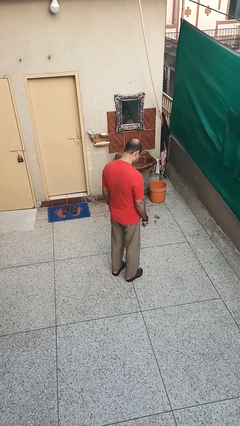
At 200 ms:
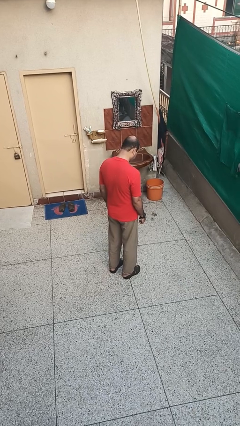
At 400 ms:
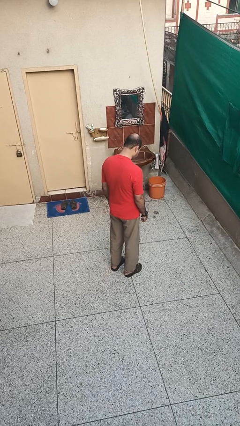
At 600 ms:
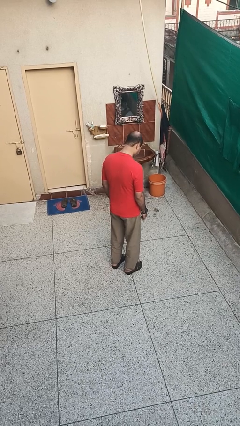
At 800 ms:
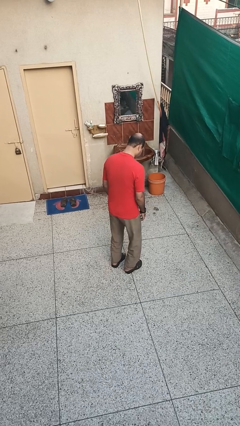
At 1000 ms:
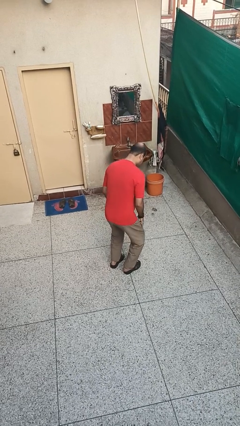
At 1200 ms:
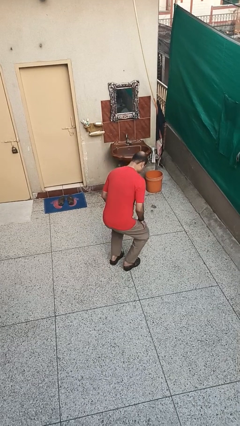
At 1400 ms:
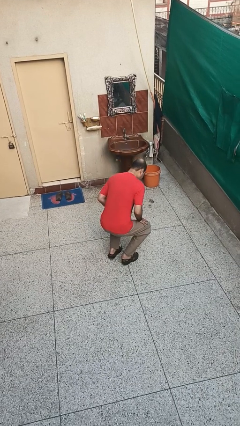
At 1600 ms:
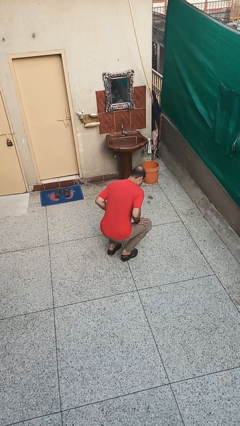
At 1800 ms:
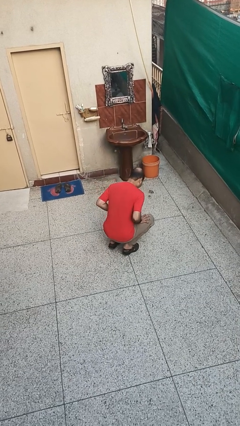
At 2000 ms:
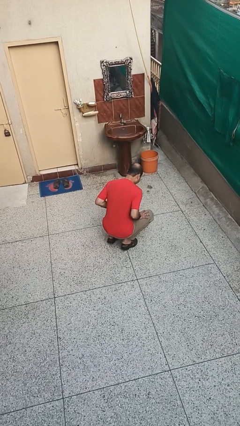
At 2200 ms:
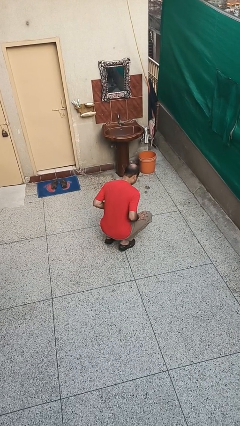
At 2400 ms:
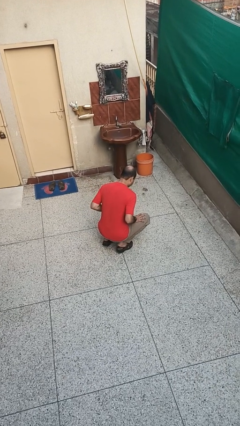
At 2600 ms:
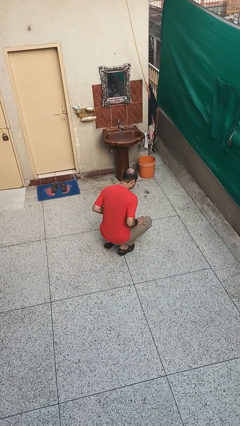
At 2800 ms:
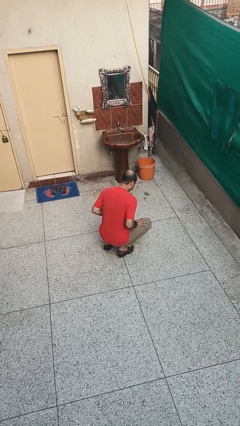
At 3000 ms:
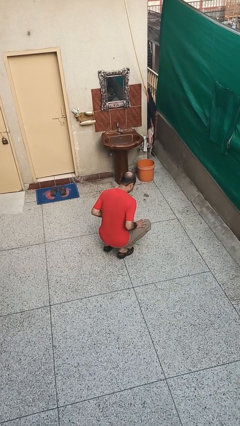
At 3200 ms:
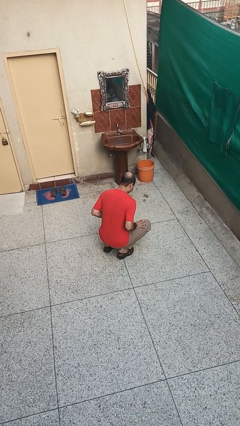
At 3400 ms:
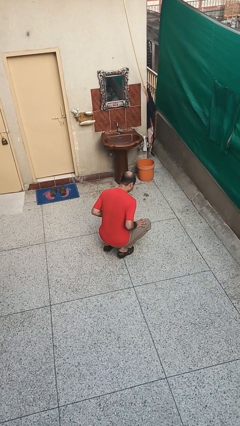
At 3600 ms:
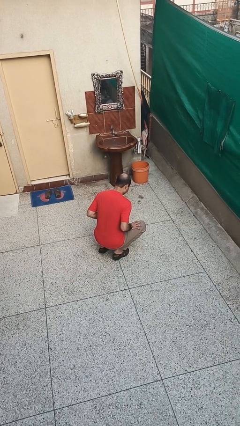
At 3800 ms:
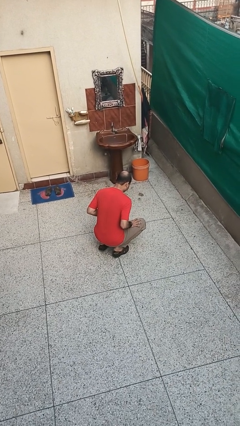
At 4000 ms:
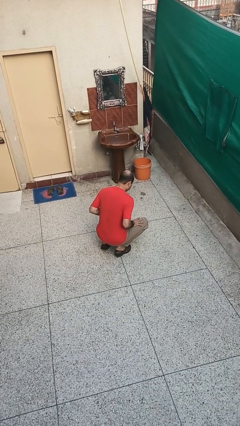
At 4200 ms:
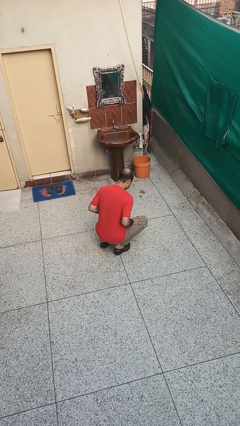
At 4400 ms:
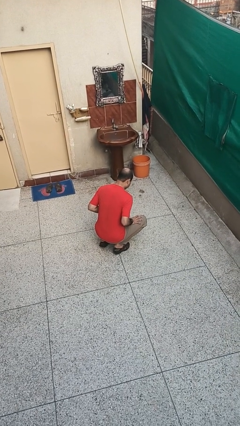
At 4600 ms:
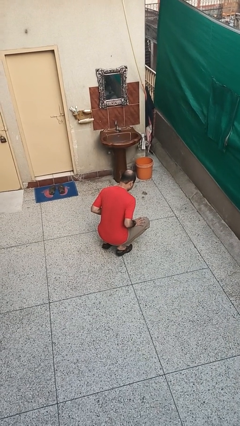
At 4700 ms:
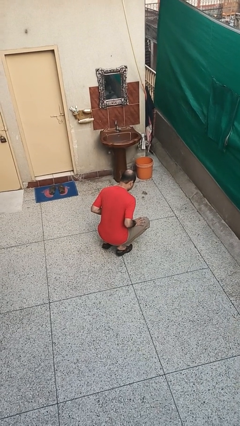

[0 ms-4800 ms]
person squats

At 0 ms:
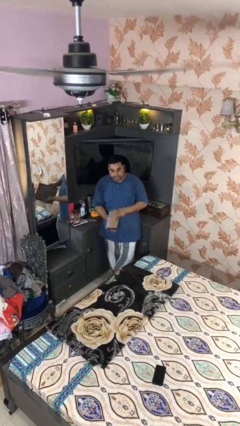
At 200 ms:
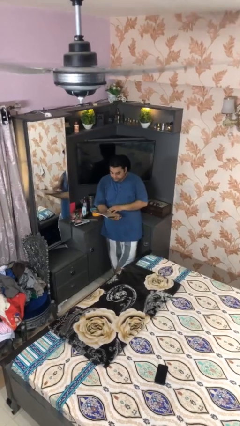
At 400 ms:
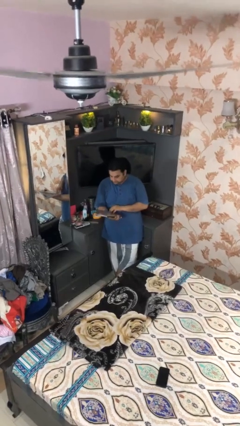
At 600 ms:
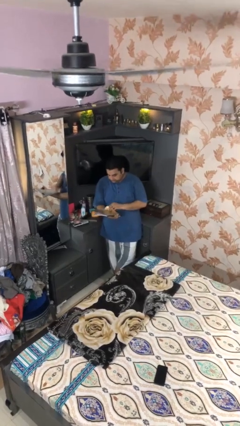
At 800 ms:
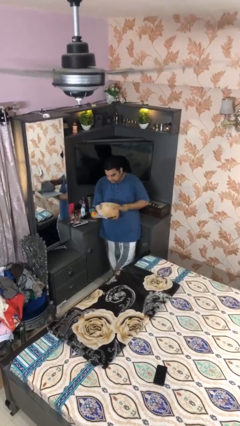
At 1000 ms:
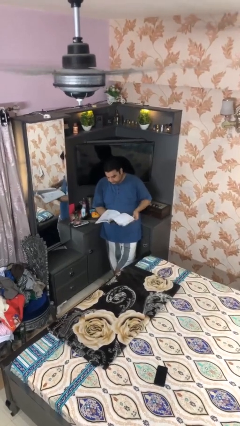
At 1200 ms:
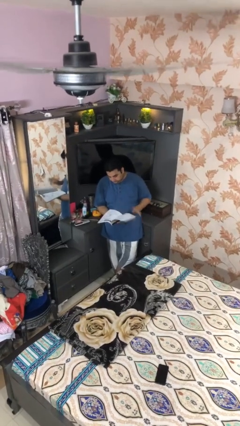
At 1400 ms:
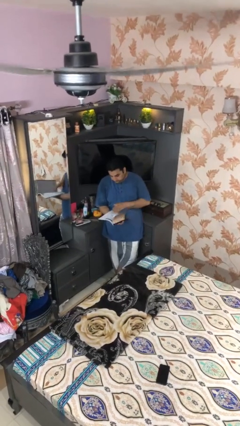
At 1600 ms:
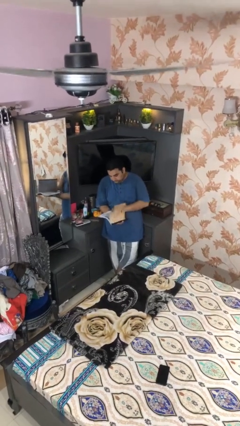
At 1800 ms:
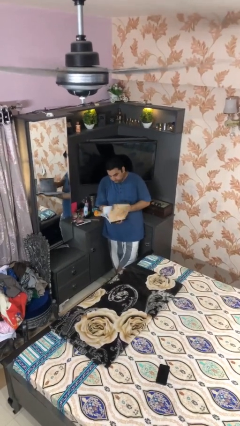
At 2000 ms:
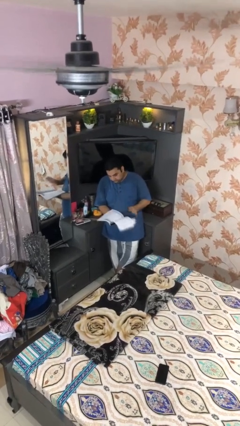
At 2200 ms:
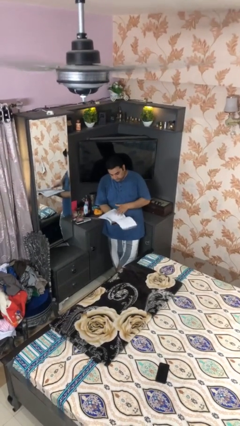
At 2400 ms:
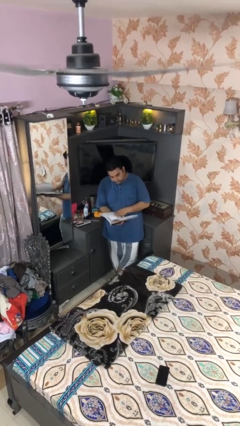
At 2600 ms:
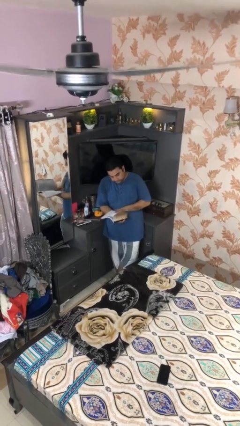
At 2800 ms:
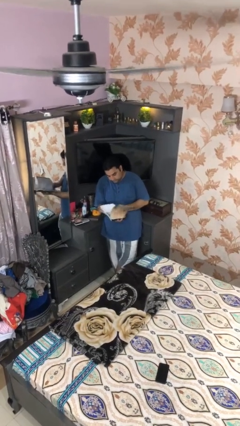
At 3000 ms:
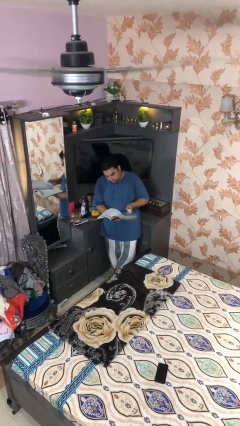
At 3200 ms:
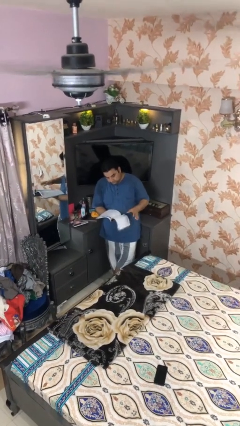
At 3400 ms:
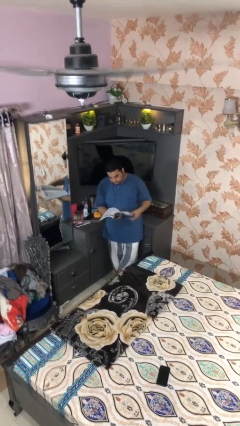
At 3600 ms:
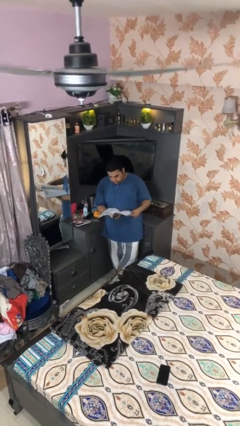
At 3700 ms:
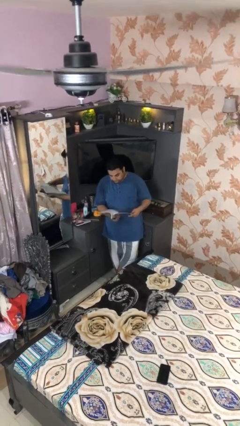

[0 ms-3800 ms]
person reads book

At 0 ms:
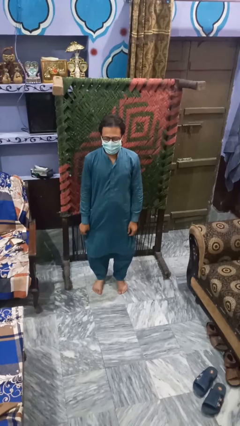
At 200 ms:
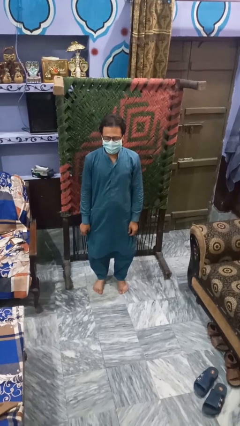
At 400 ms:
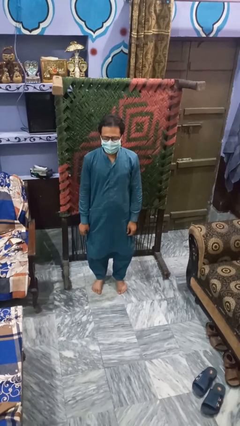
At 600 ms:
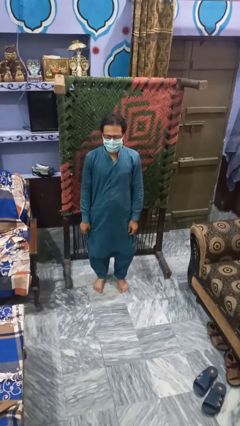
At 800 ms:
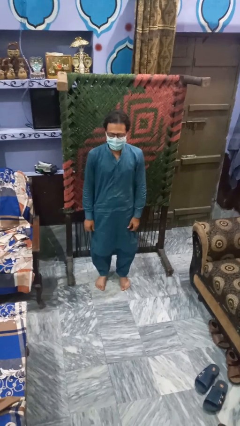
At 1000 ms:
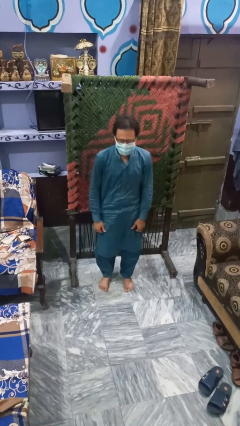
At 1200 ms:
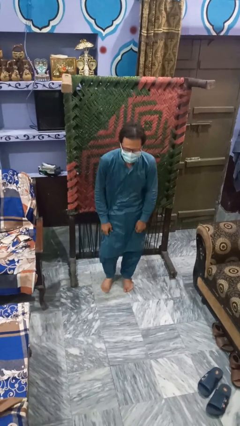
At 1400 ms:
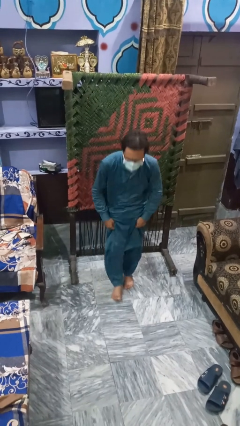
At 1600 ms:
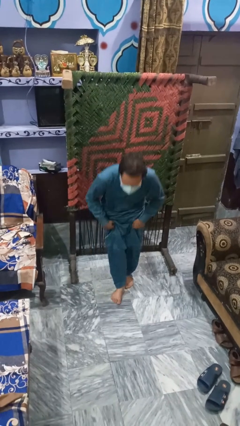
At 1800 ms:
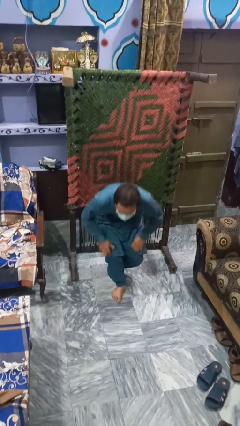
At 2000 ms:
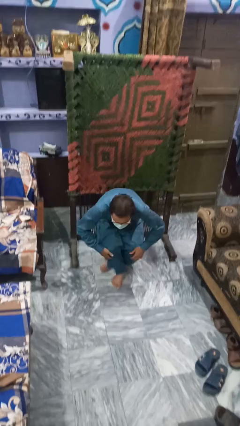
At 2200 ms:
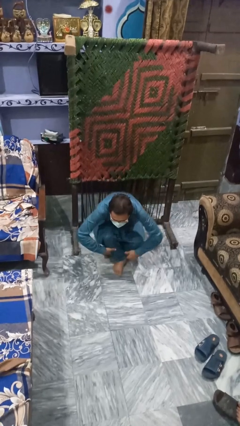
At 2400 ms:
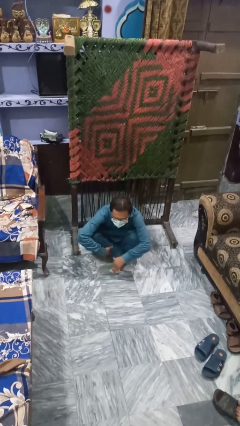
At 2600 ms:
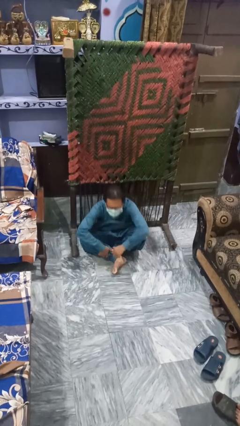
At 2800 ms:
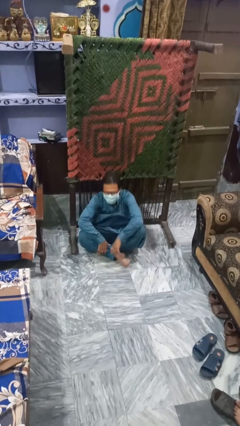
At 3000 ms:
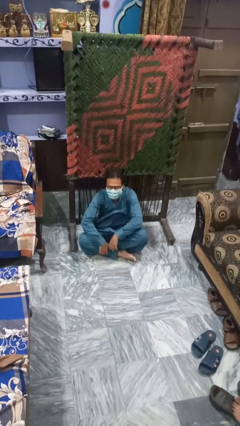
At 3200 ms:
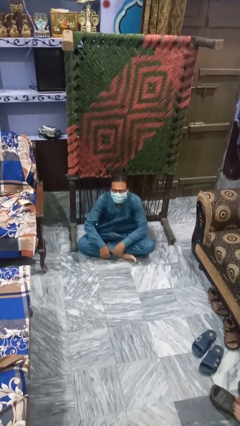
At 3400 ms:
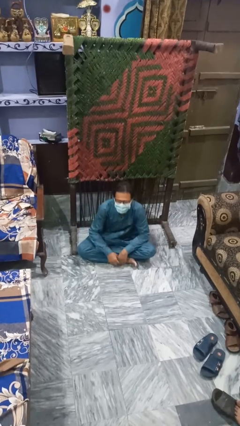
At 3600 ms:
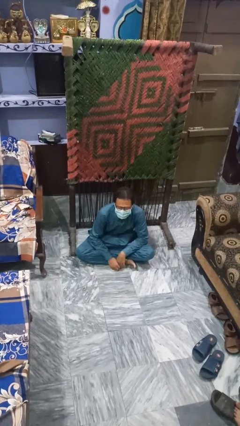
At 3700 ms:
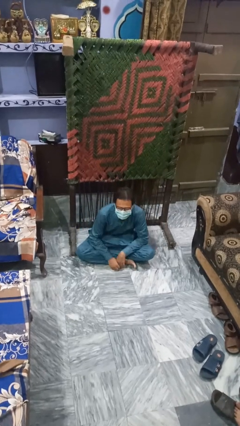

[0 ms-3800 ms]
person sits crisscross

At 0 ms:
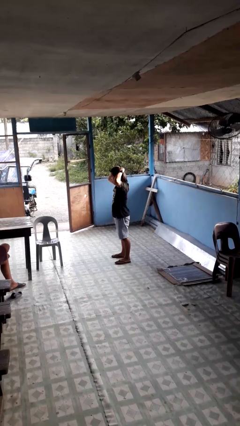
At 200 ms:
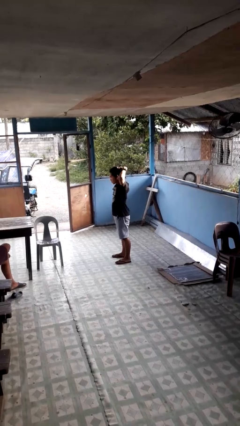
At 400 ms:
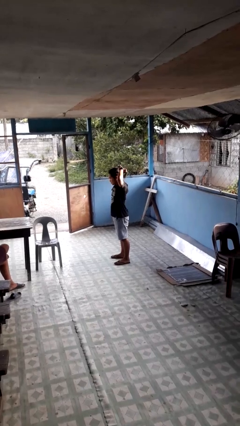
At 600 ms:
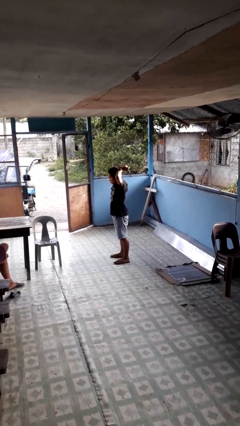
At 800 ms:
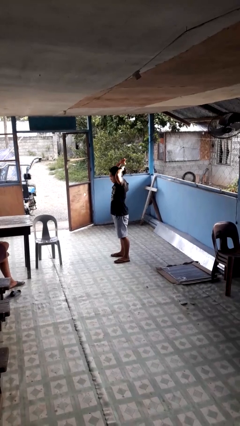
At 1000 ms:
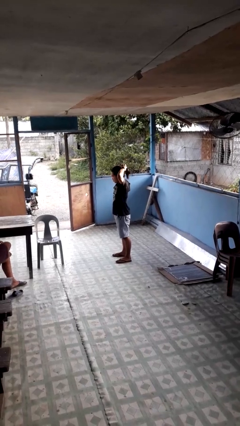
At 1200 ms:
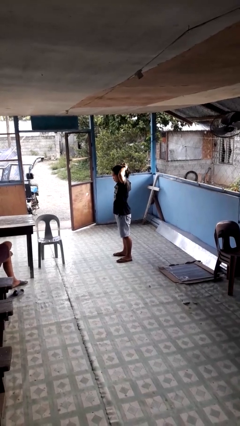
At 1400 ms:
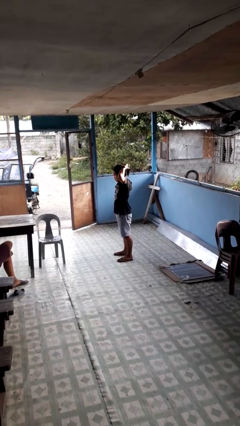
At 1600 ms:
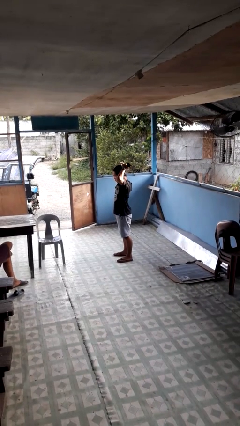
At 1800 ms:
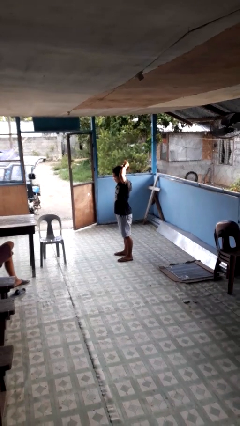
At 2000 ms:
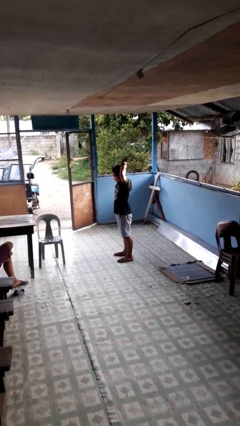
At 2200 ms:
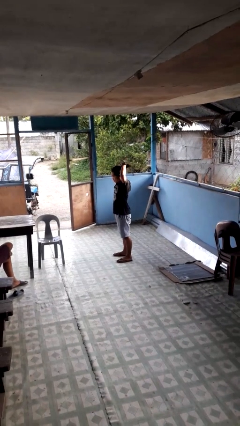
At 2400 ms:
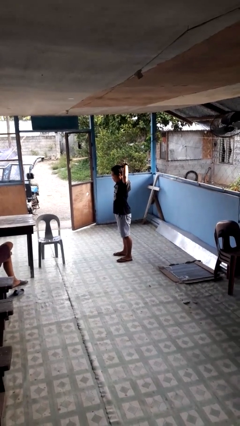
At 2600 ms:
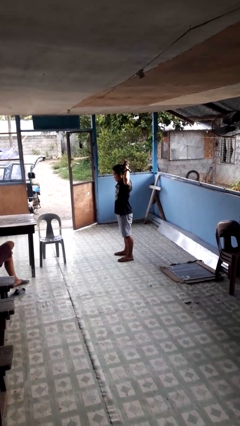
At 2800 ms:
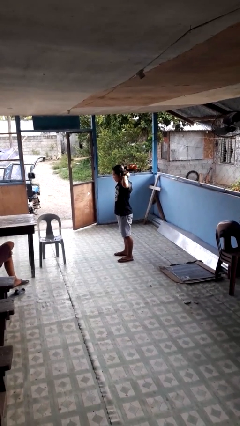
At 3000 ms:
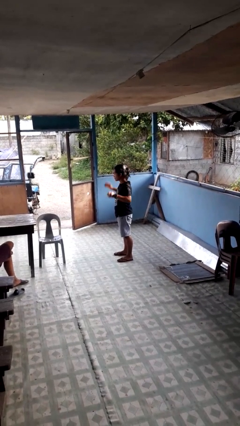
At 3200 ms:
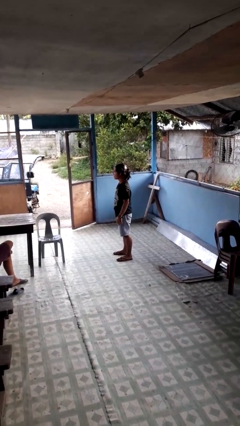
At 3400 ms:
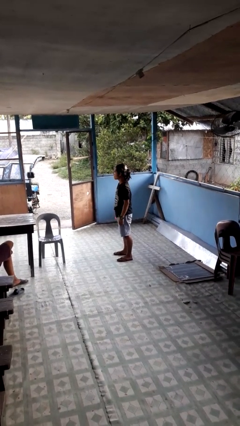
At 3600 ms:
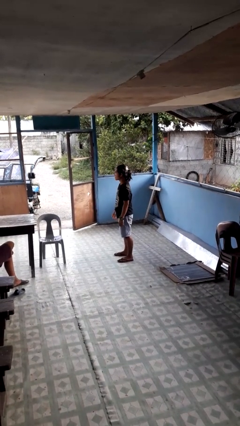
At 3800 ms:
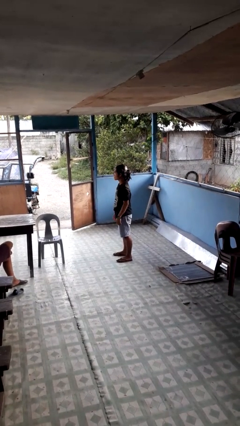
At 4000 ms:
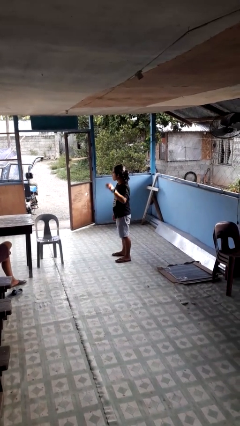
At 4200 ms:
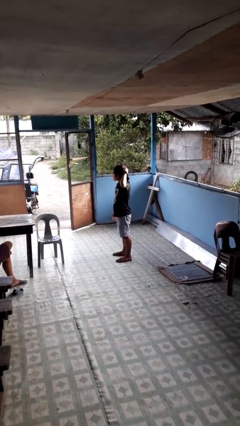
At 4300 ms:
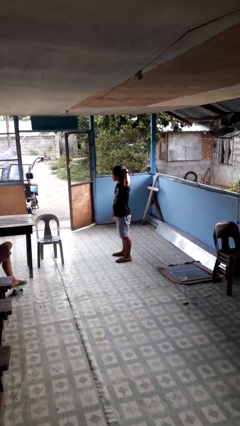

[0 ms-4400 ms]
person puts hair in ponytail

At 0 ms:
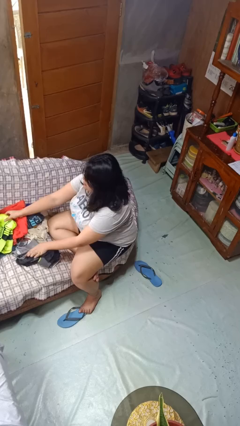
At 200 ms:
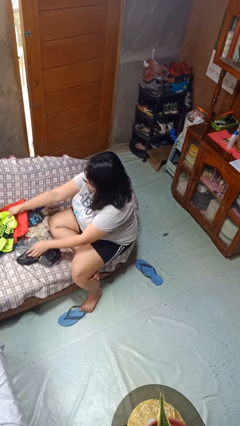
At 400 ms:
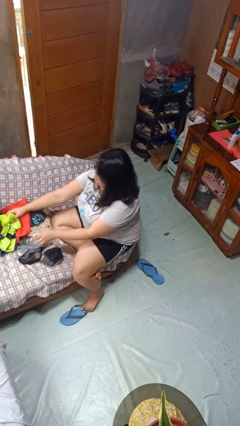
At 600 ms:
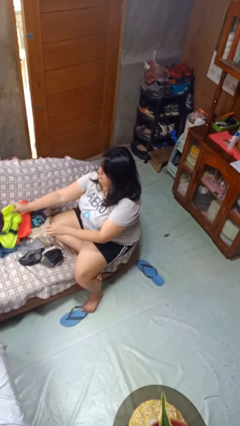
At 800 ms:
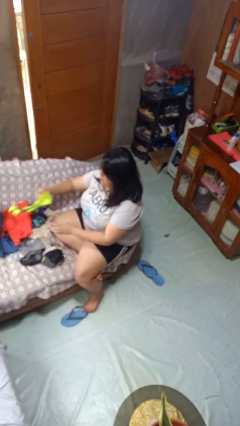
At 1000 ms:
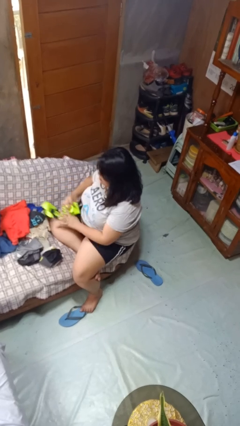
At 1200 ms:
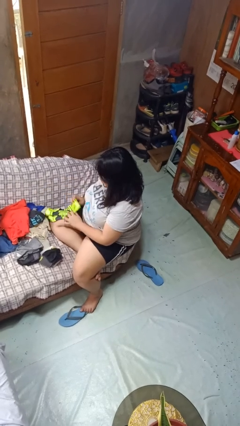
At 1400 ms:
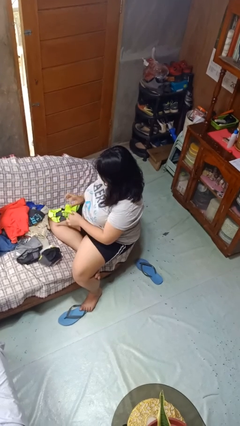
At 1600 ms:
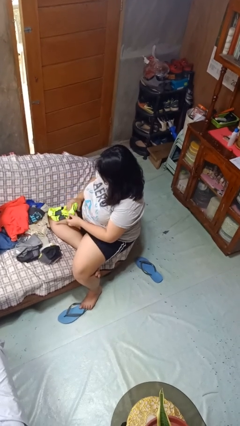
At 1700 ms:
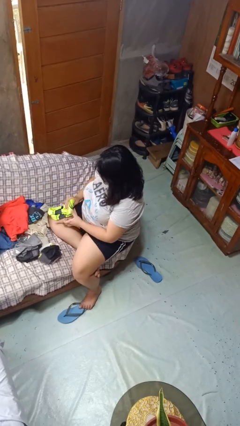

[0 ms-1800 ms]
person folds socks
